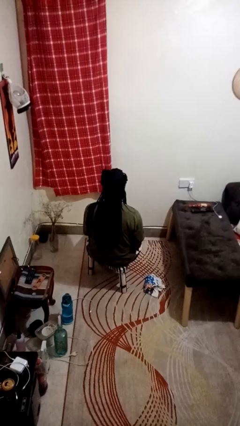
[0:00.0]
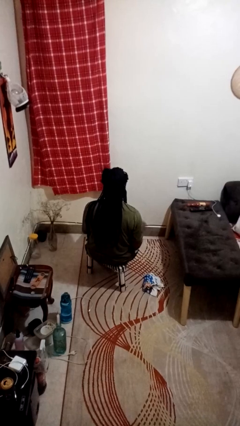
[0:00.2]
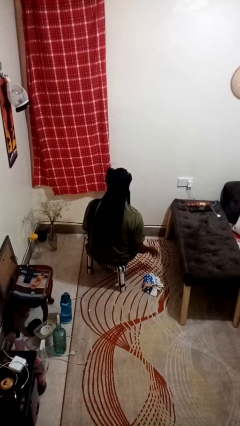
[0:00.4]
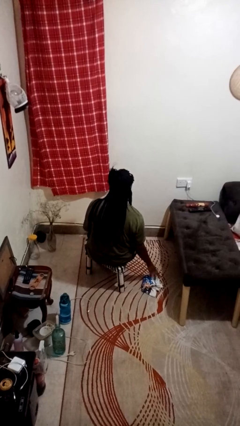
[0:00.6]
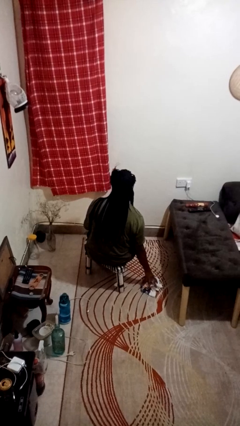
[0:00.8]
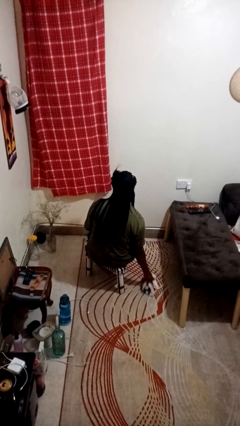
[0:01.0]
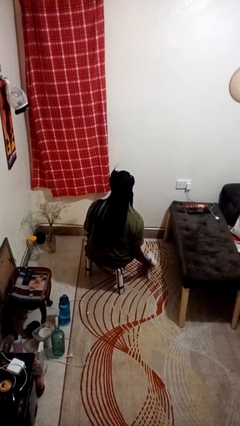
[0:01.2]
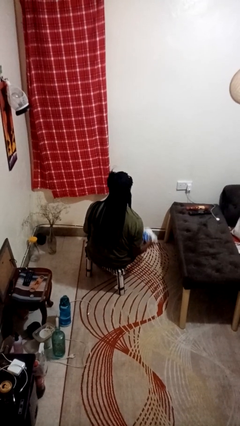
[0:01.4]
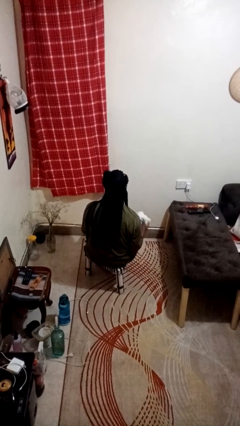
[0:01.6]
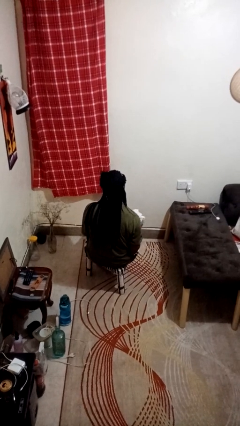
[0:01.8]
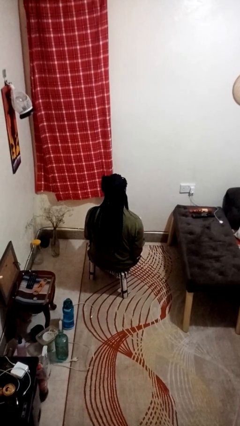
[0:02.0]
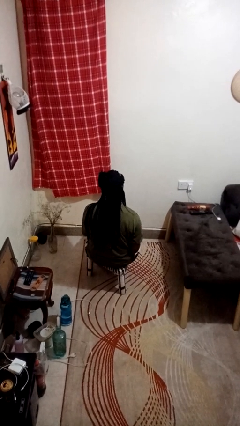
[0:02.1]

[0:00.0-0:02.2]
person picks up object from floor

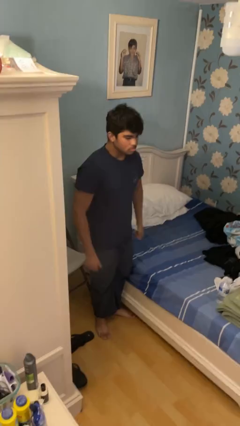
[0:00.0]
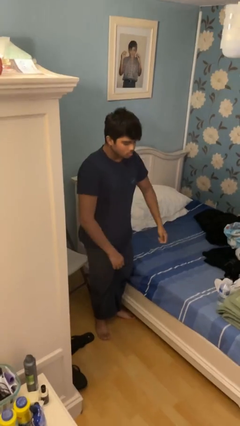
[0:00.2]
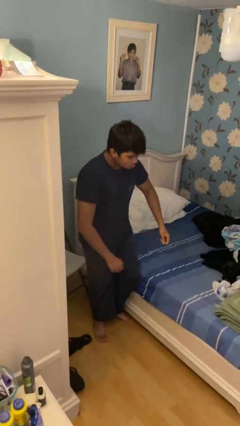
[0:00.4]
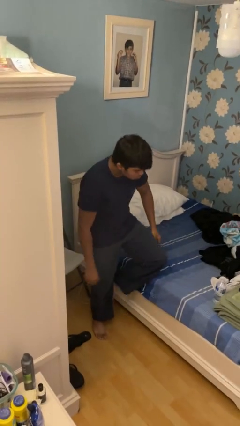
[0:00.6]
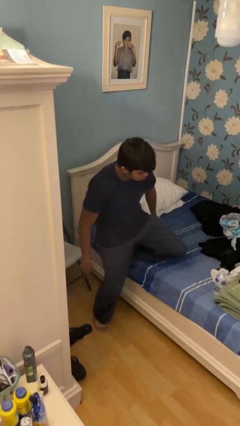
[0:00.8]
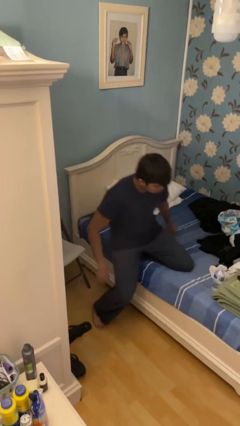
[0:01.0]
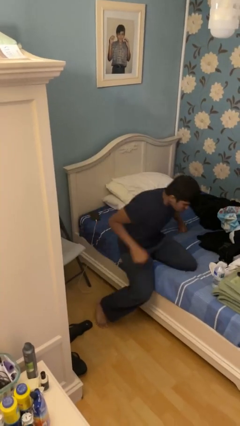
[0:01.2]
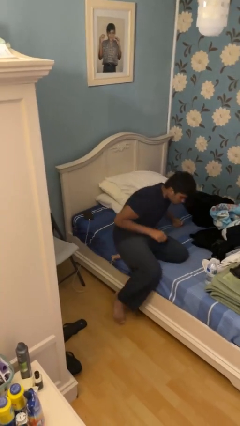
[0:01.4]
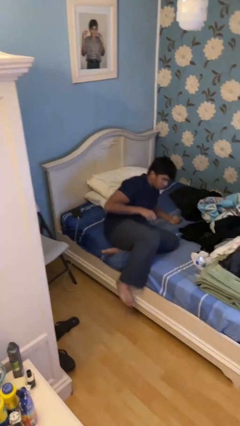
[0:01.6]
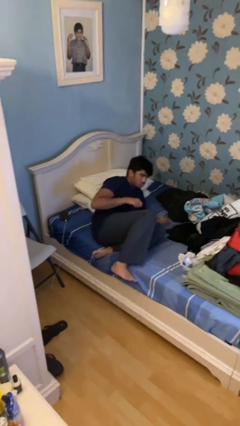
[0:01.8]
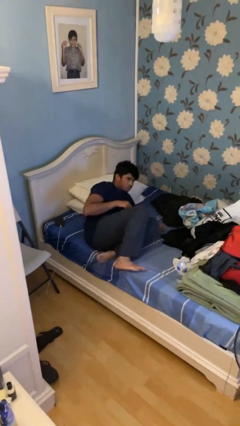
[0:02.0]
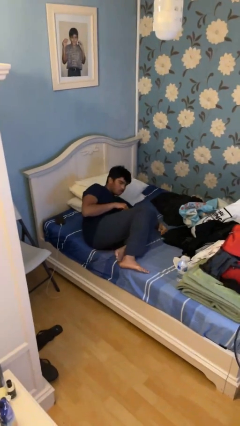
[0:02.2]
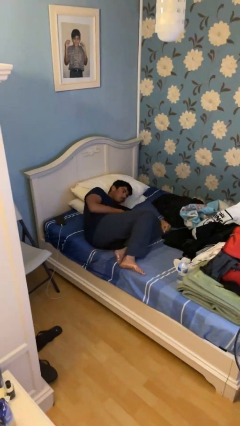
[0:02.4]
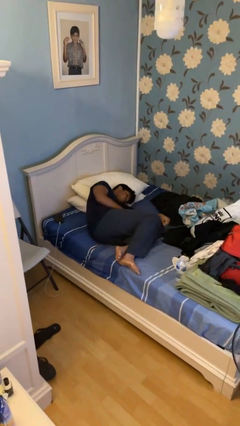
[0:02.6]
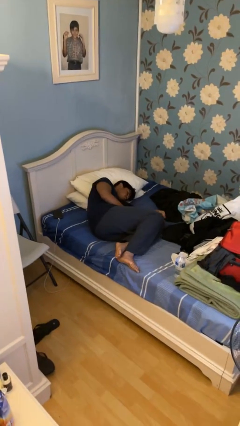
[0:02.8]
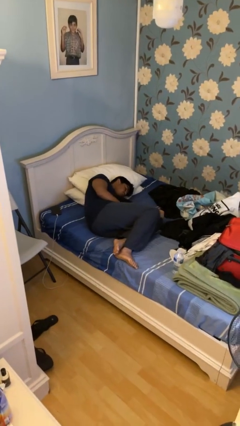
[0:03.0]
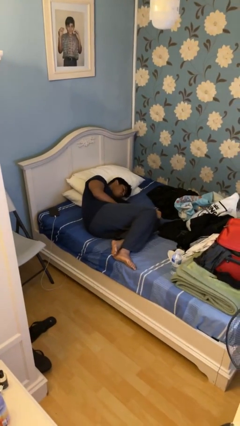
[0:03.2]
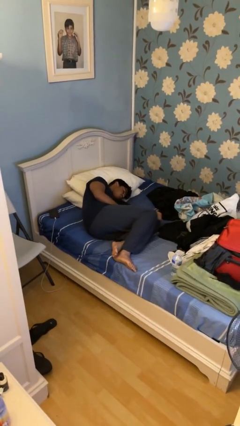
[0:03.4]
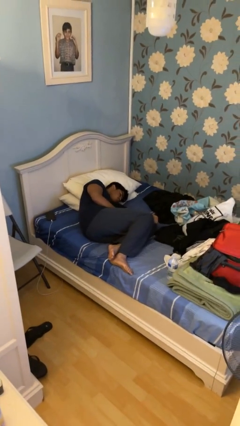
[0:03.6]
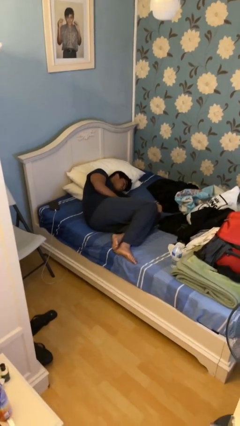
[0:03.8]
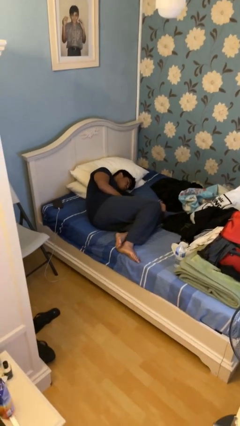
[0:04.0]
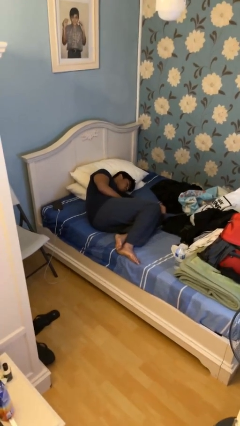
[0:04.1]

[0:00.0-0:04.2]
person lies down on bed

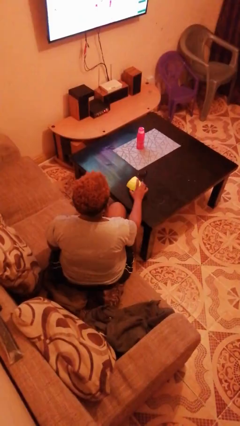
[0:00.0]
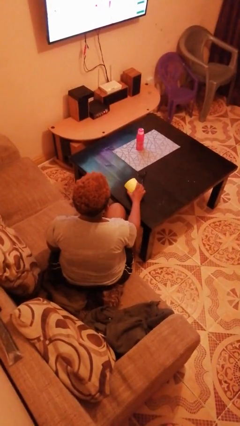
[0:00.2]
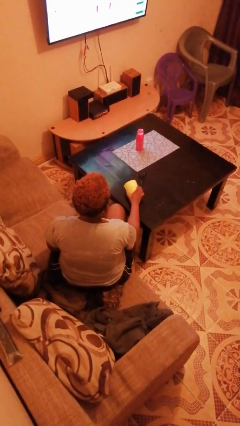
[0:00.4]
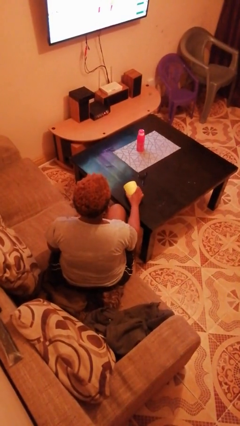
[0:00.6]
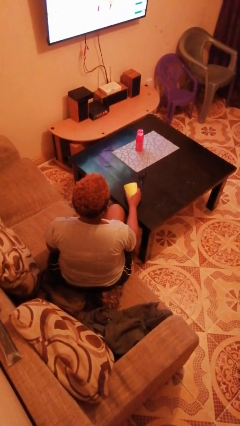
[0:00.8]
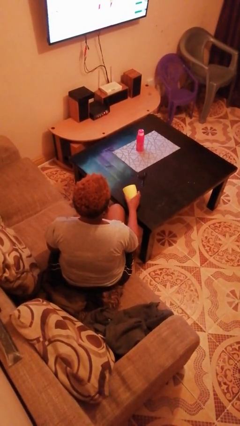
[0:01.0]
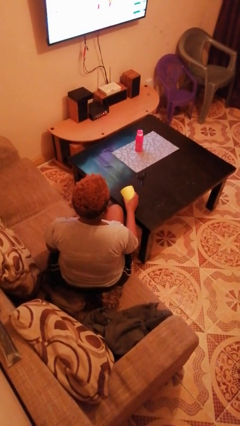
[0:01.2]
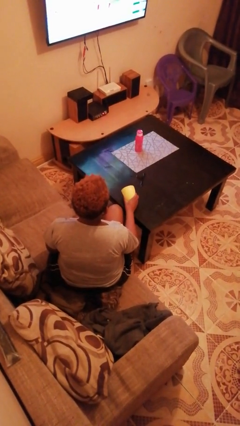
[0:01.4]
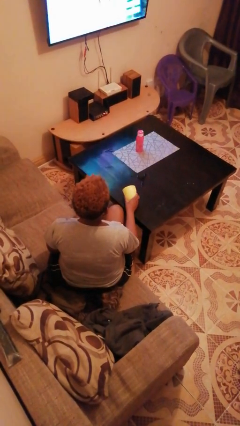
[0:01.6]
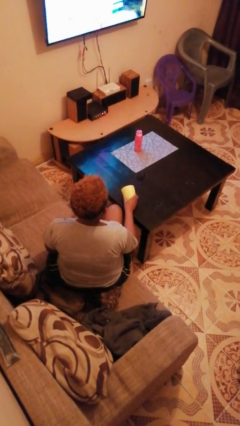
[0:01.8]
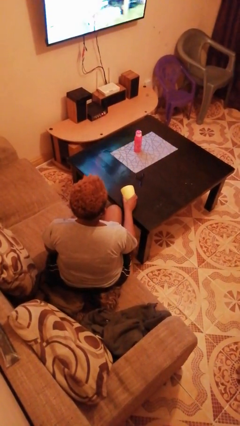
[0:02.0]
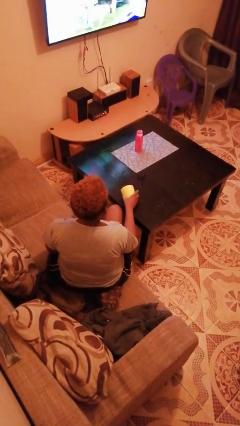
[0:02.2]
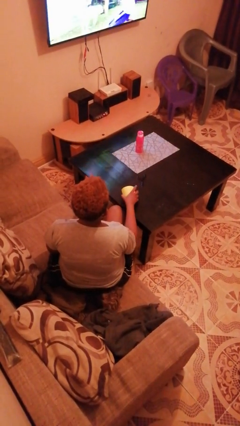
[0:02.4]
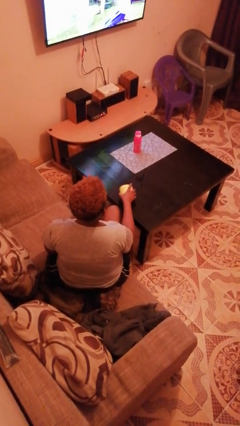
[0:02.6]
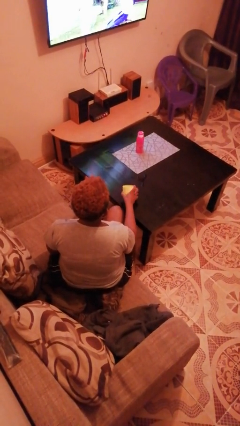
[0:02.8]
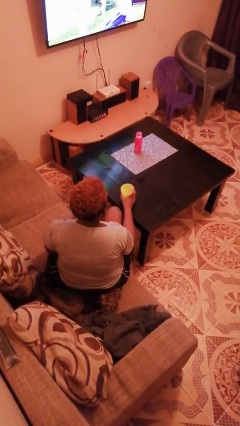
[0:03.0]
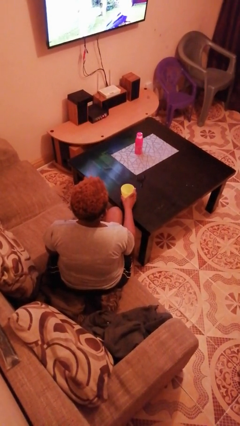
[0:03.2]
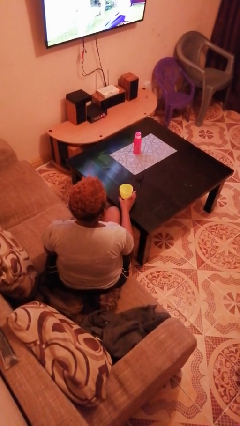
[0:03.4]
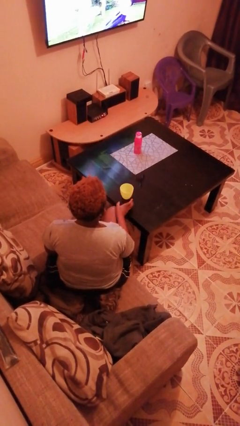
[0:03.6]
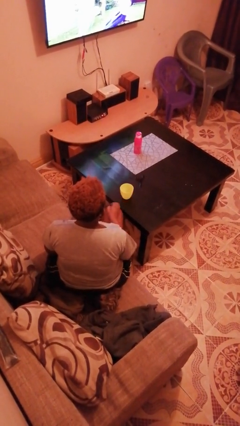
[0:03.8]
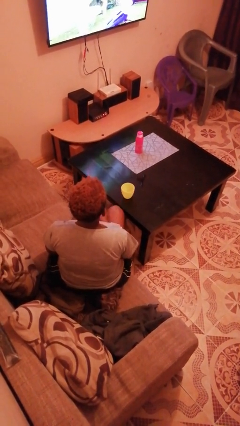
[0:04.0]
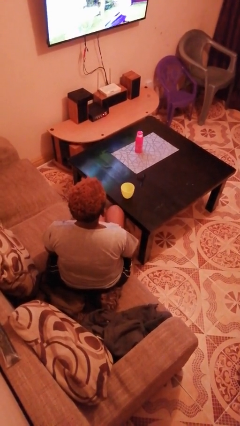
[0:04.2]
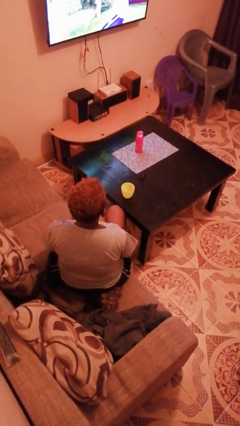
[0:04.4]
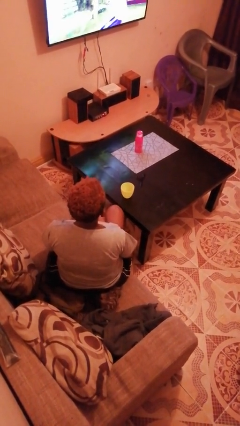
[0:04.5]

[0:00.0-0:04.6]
person sets upright glass

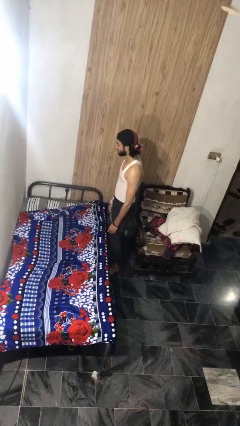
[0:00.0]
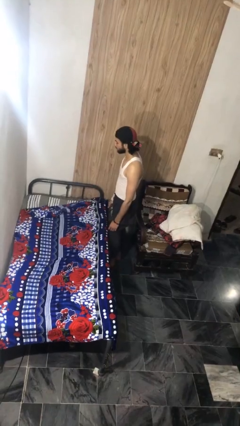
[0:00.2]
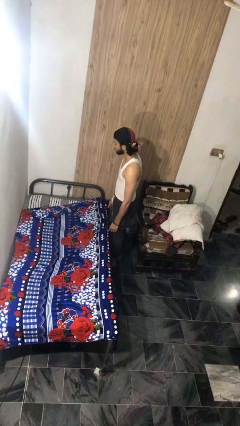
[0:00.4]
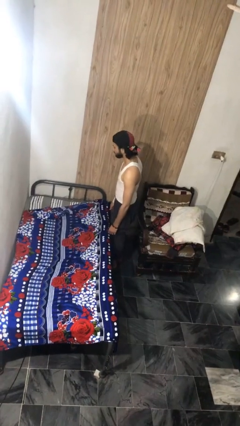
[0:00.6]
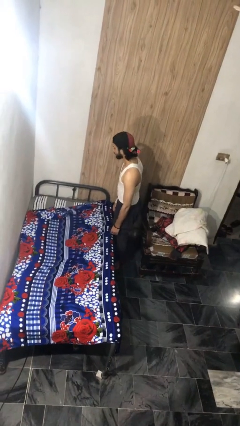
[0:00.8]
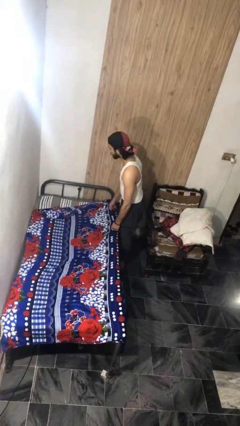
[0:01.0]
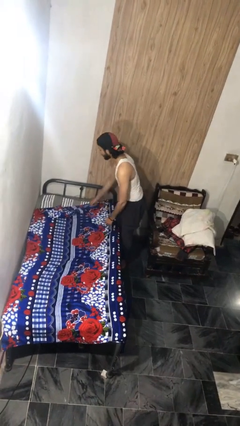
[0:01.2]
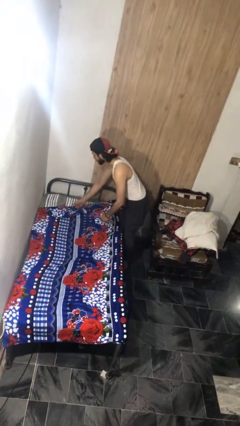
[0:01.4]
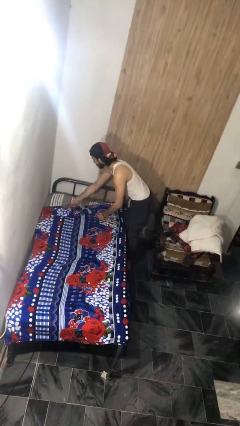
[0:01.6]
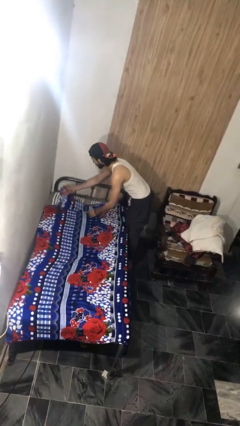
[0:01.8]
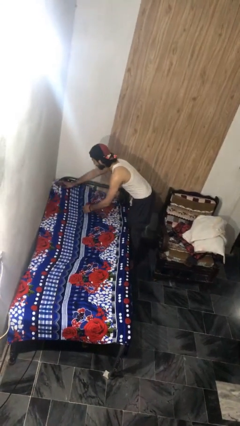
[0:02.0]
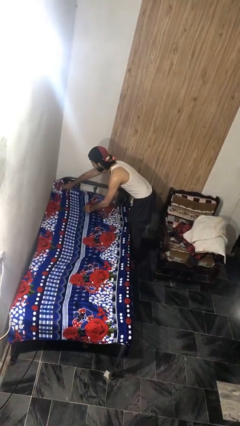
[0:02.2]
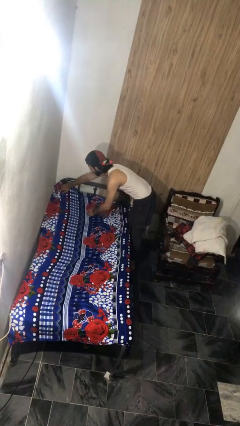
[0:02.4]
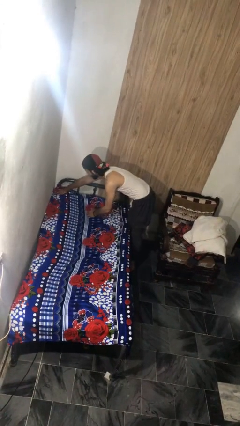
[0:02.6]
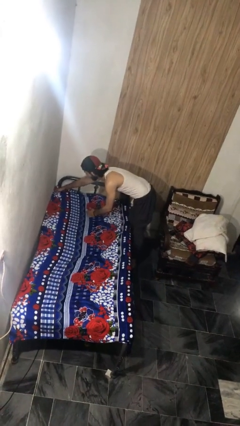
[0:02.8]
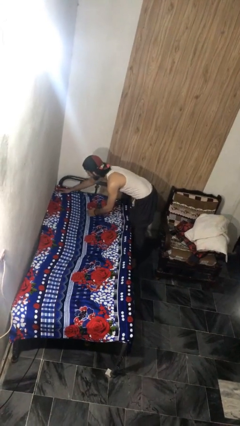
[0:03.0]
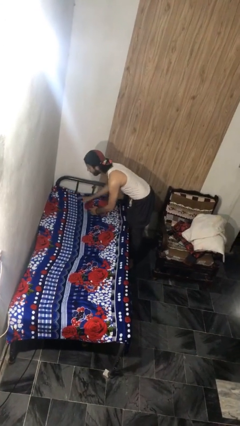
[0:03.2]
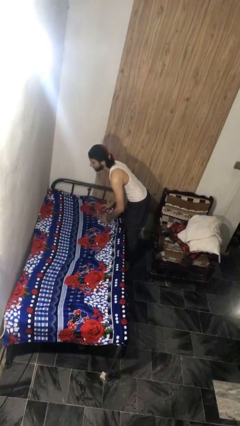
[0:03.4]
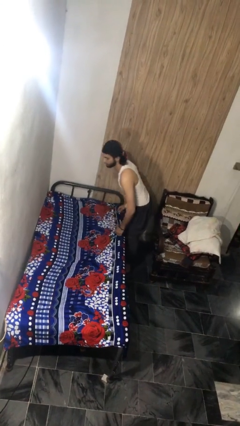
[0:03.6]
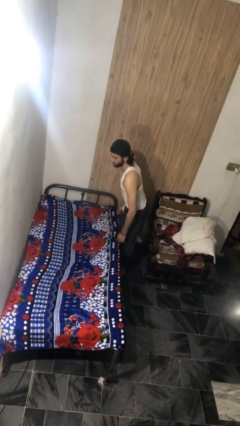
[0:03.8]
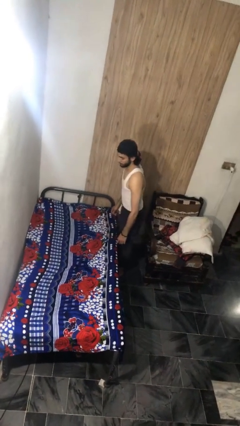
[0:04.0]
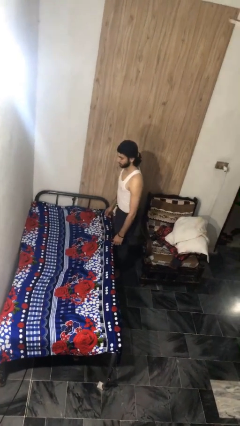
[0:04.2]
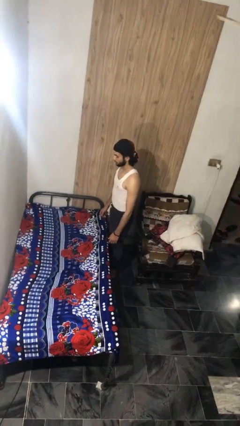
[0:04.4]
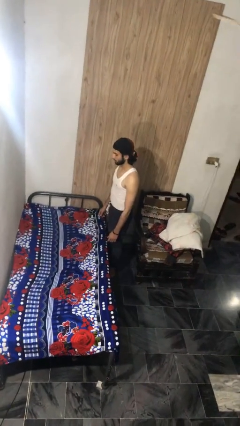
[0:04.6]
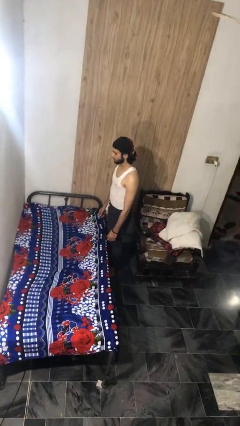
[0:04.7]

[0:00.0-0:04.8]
person makes bed

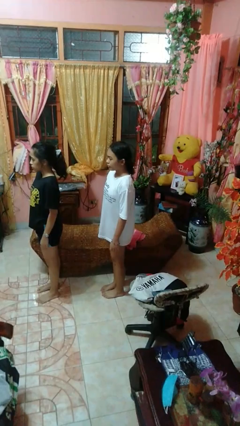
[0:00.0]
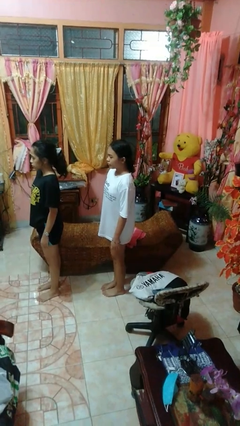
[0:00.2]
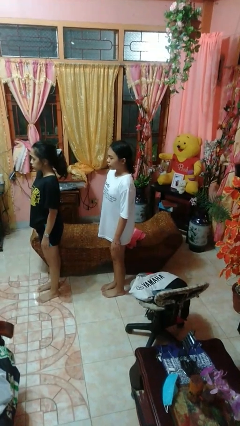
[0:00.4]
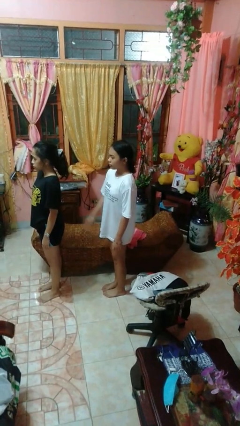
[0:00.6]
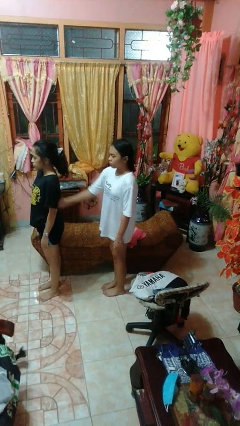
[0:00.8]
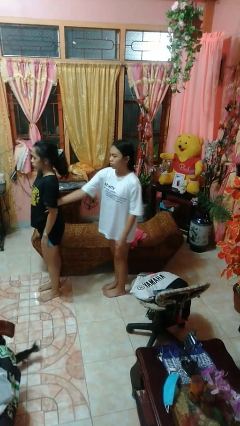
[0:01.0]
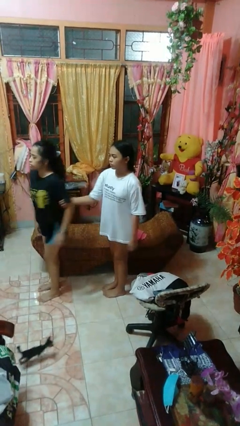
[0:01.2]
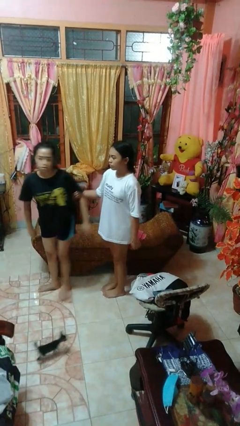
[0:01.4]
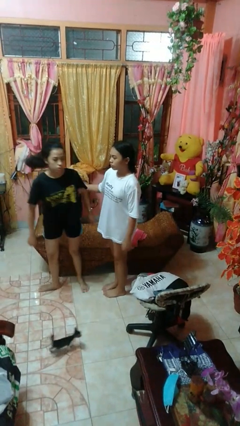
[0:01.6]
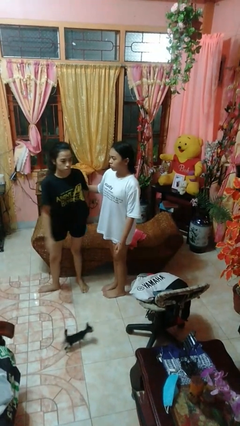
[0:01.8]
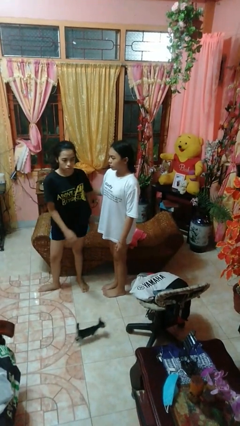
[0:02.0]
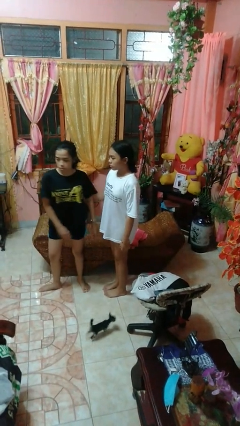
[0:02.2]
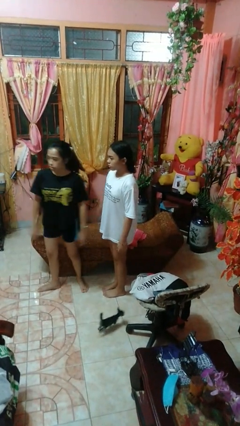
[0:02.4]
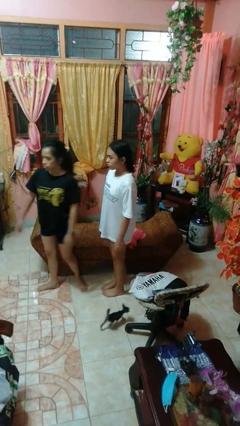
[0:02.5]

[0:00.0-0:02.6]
person grabs person by bicep
